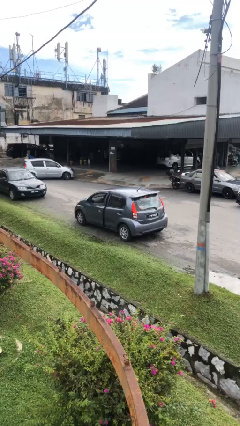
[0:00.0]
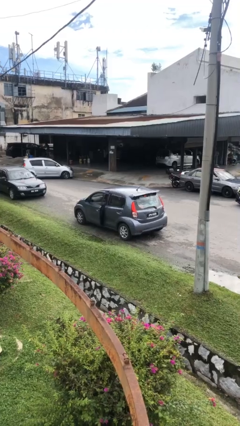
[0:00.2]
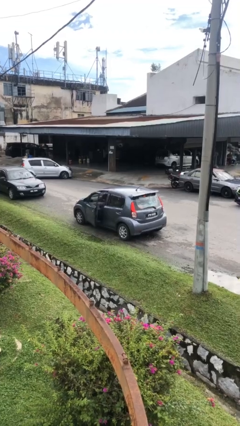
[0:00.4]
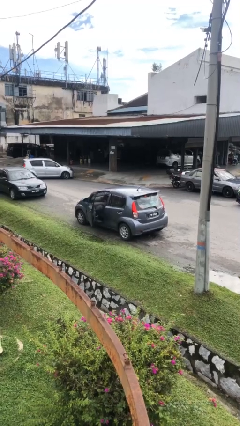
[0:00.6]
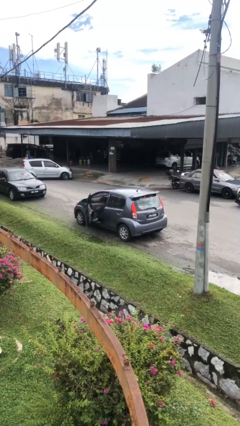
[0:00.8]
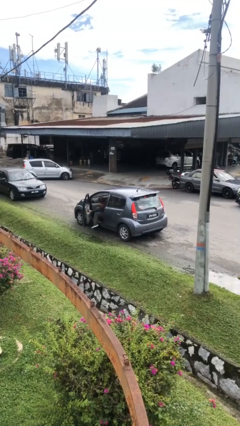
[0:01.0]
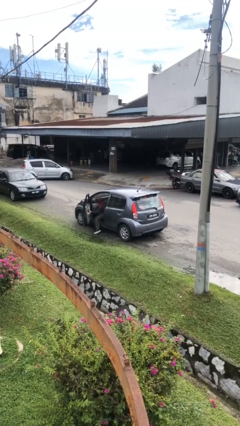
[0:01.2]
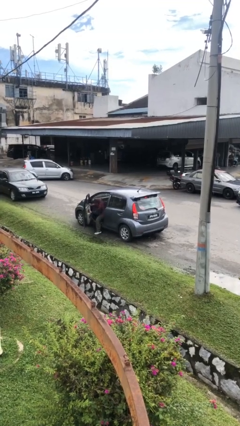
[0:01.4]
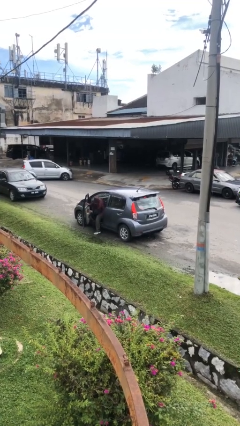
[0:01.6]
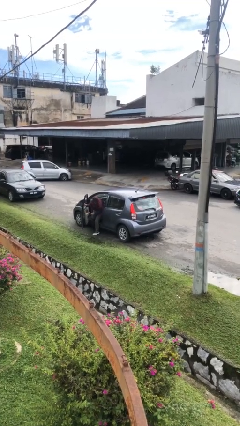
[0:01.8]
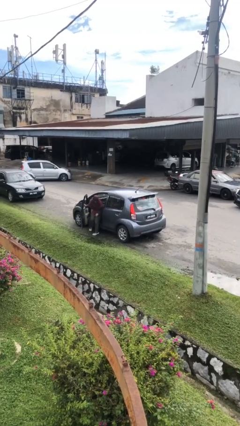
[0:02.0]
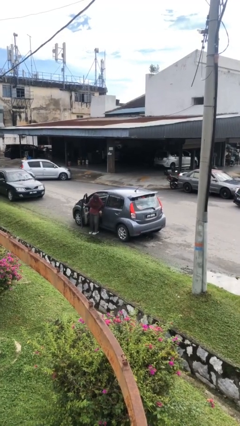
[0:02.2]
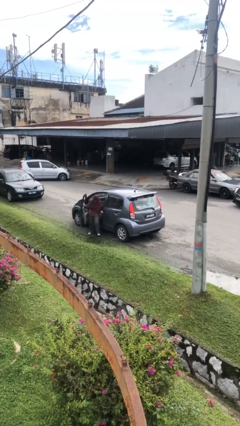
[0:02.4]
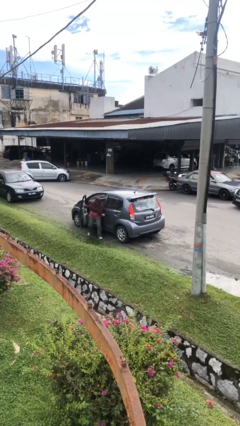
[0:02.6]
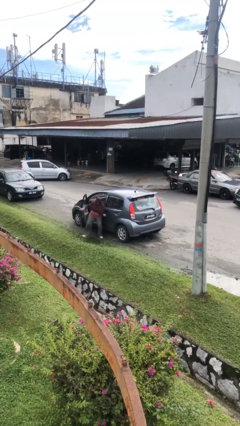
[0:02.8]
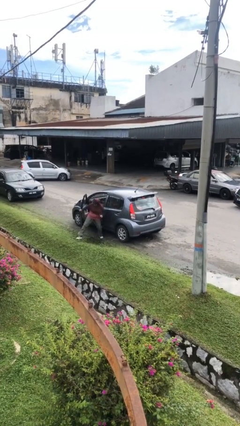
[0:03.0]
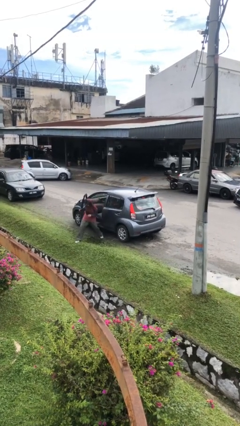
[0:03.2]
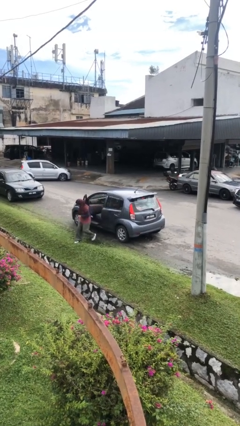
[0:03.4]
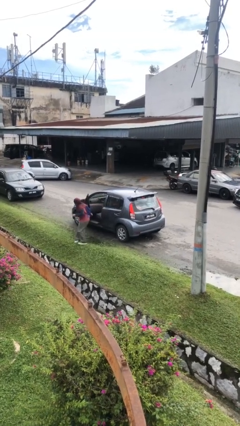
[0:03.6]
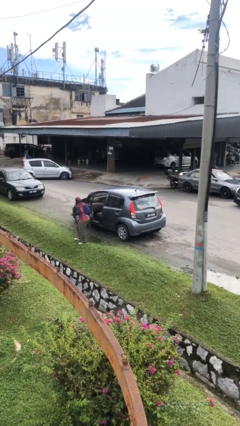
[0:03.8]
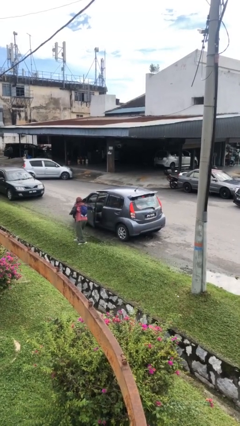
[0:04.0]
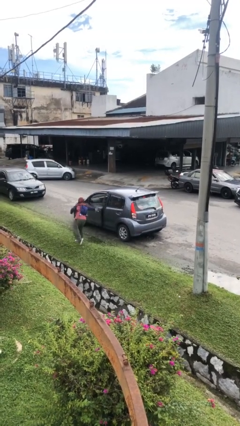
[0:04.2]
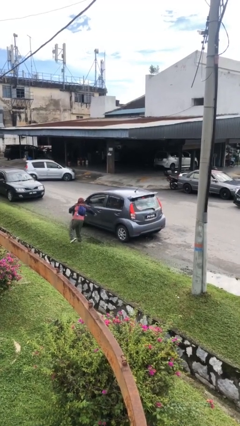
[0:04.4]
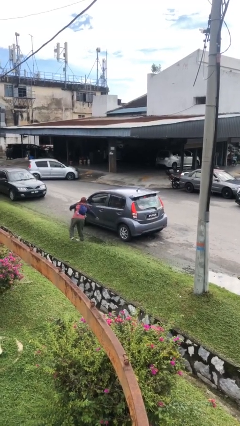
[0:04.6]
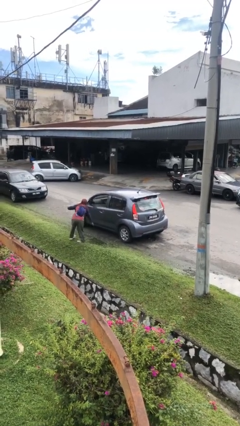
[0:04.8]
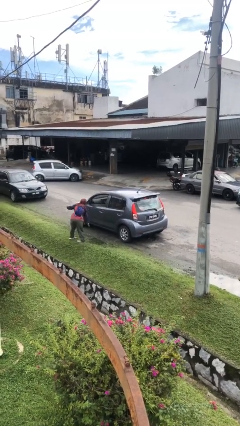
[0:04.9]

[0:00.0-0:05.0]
car drops off person

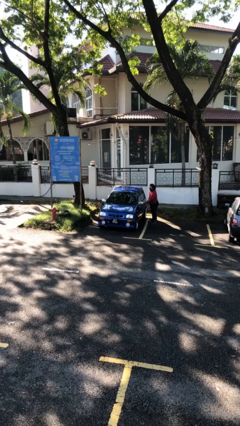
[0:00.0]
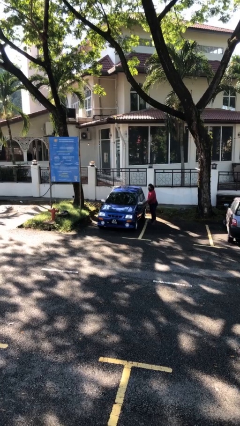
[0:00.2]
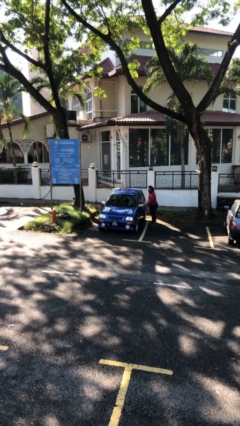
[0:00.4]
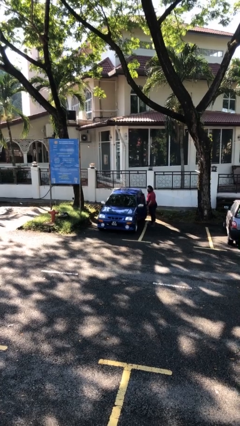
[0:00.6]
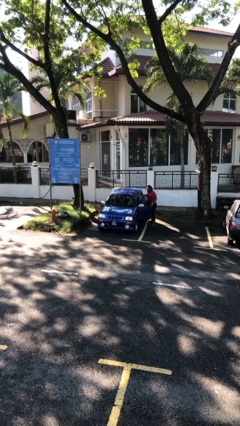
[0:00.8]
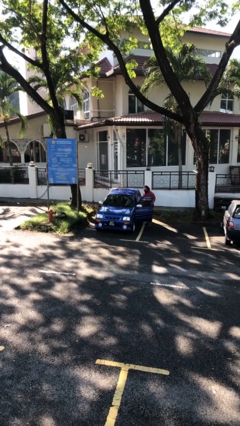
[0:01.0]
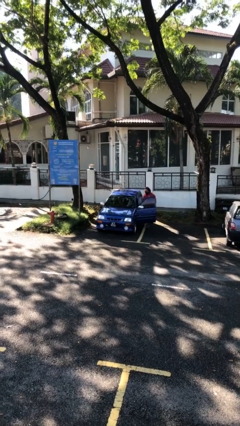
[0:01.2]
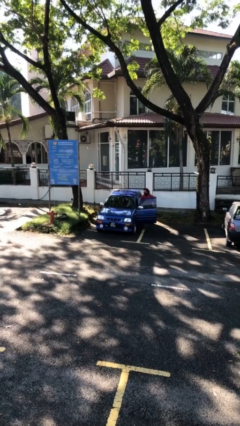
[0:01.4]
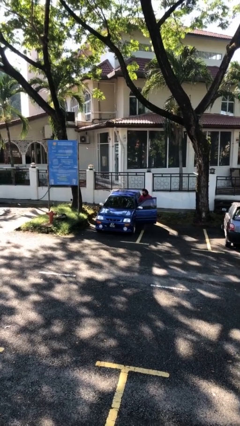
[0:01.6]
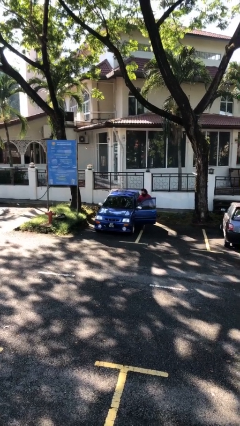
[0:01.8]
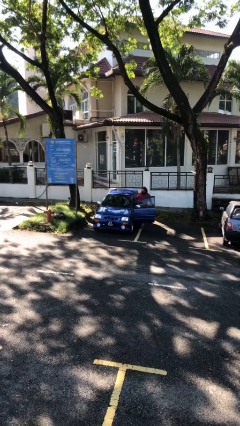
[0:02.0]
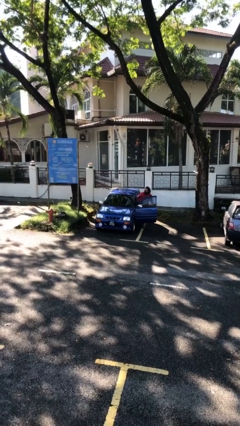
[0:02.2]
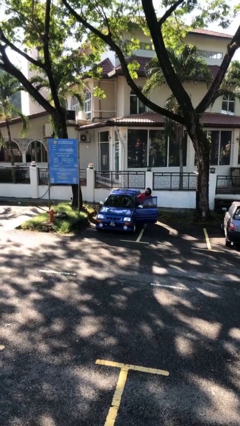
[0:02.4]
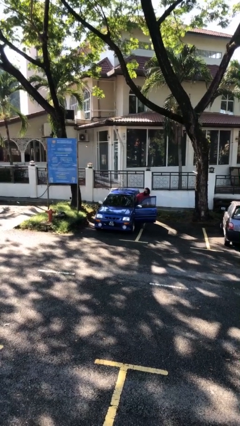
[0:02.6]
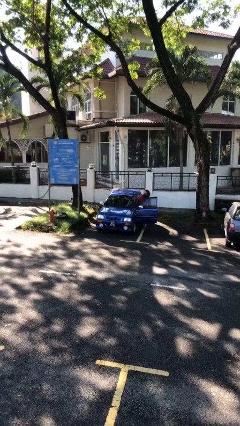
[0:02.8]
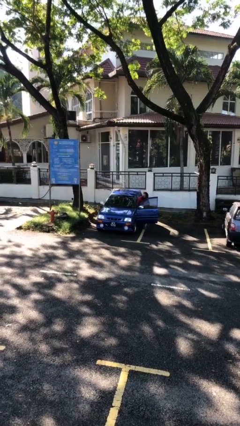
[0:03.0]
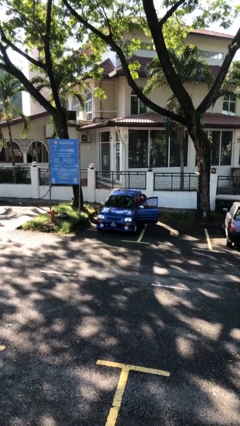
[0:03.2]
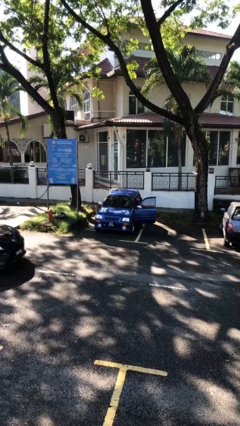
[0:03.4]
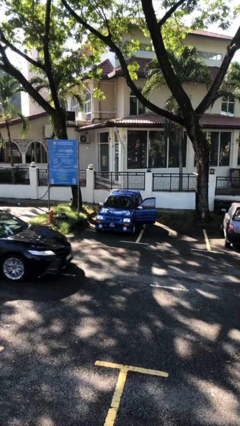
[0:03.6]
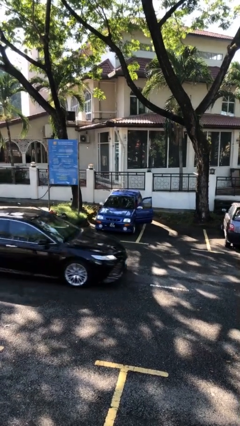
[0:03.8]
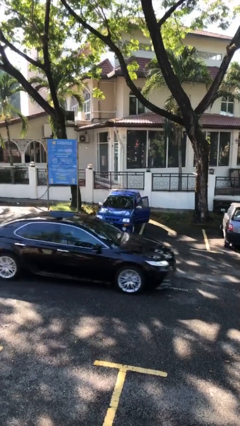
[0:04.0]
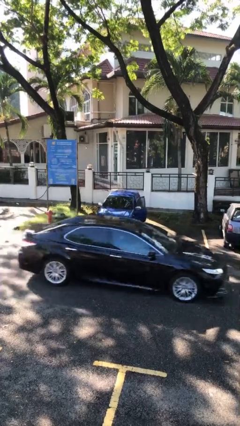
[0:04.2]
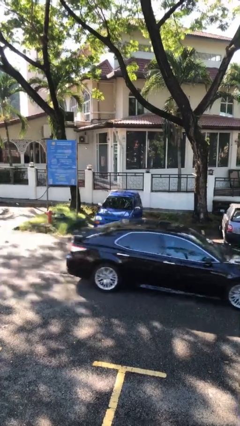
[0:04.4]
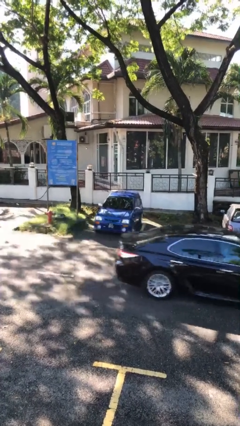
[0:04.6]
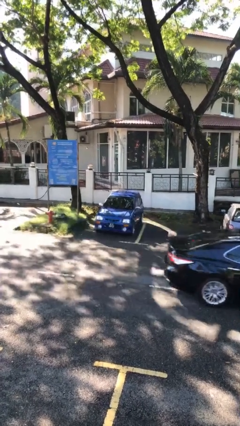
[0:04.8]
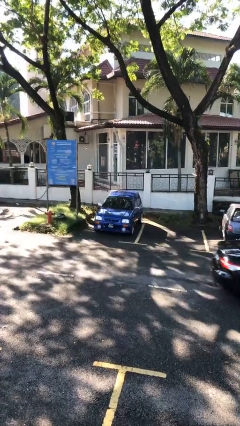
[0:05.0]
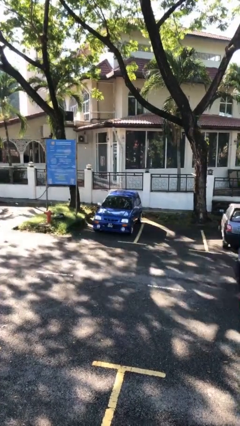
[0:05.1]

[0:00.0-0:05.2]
car picks up person

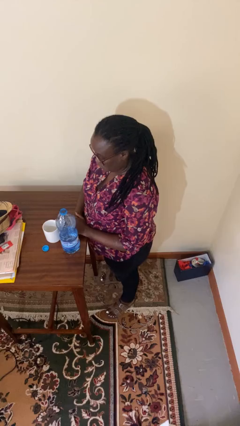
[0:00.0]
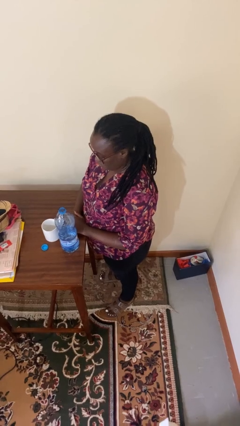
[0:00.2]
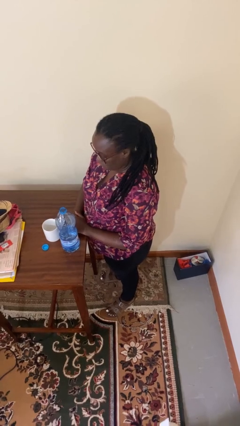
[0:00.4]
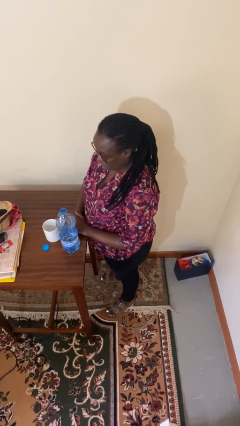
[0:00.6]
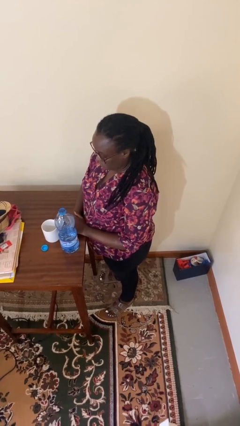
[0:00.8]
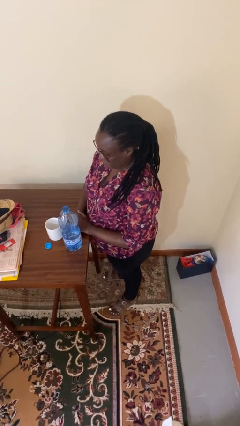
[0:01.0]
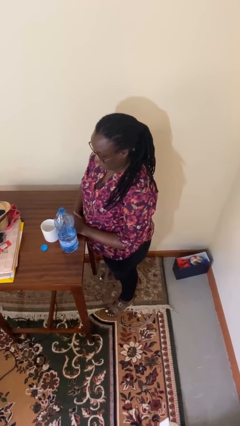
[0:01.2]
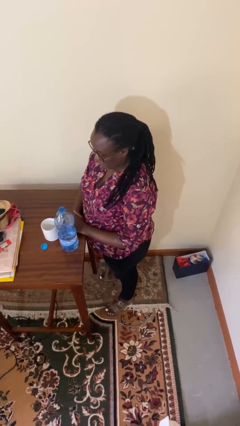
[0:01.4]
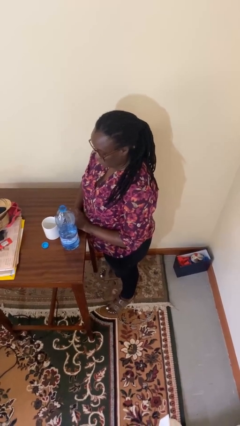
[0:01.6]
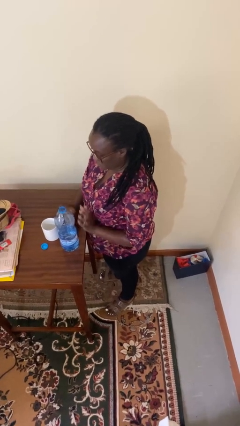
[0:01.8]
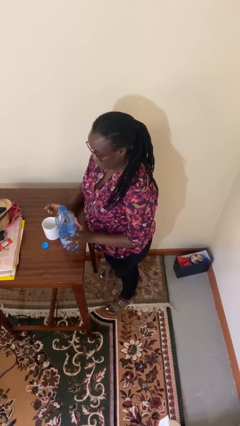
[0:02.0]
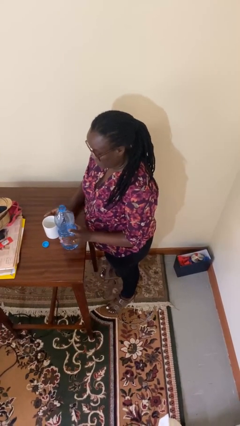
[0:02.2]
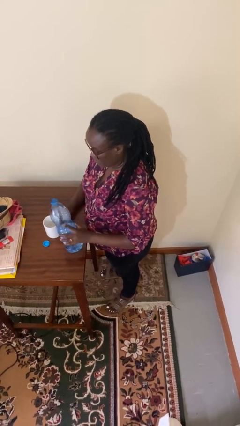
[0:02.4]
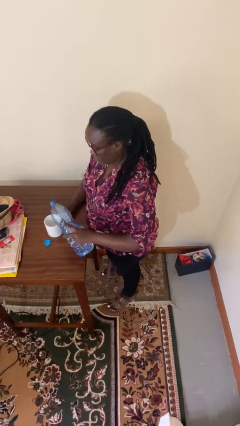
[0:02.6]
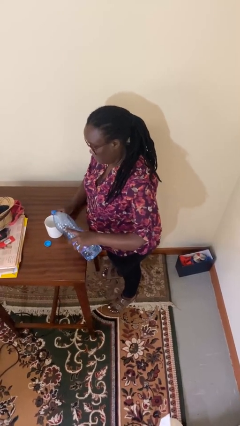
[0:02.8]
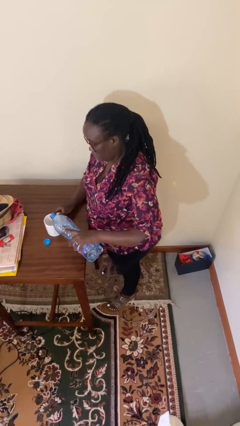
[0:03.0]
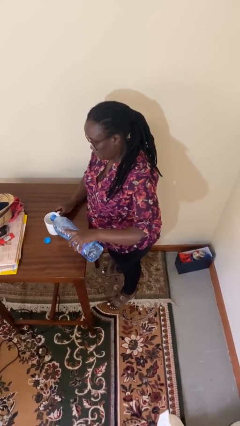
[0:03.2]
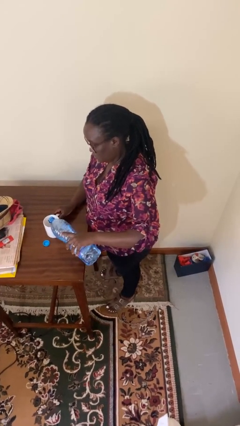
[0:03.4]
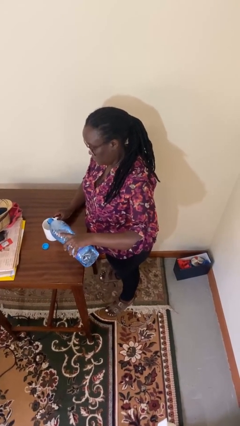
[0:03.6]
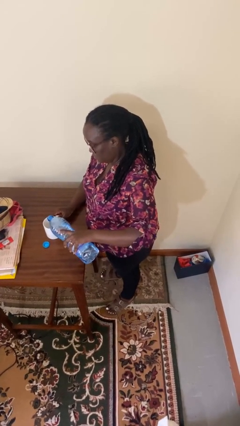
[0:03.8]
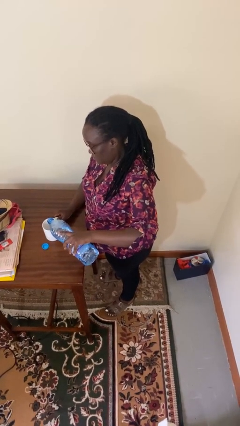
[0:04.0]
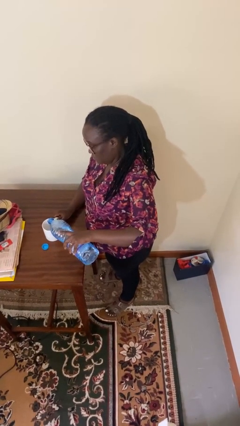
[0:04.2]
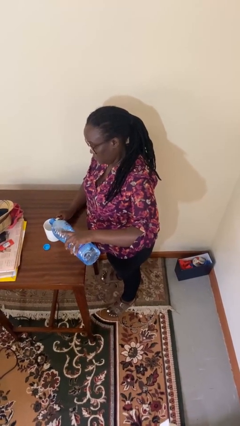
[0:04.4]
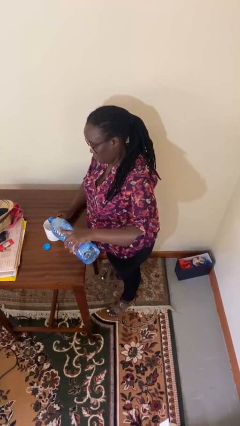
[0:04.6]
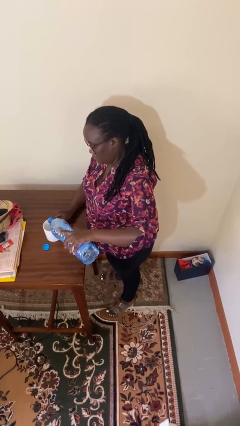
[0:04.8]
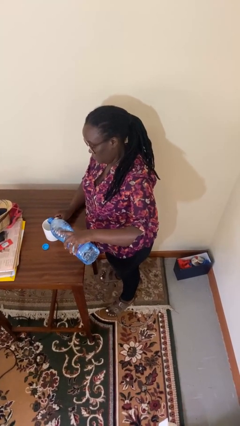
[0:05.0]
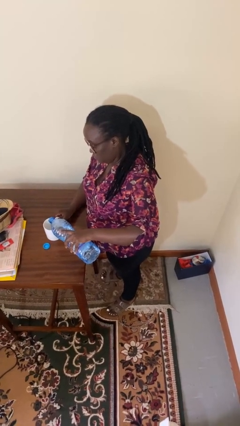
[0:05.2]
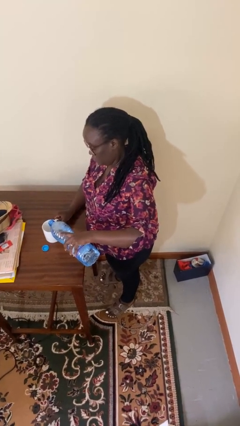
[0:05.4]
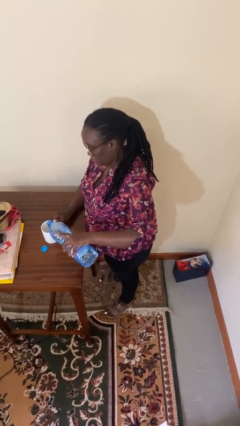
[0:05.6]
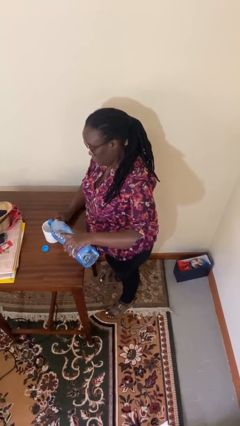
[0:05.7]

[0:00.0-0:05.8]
person pours liquid into cup

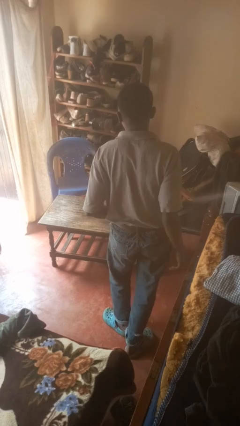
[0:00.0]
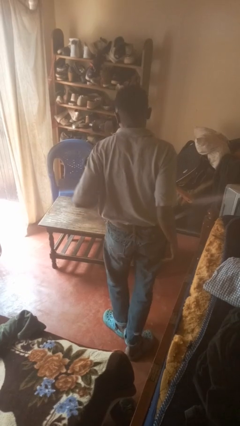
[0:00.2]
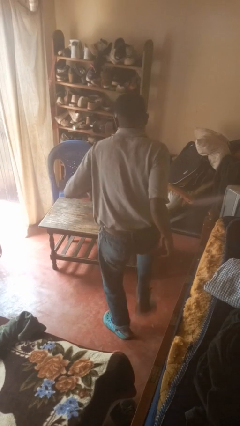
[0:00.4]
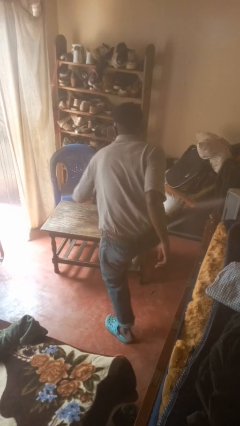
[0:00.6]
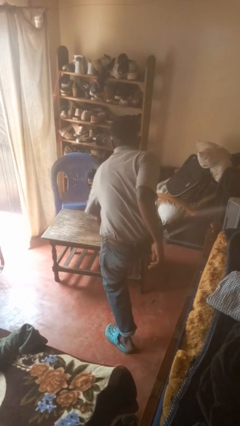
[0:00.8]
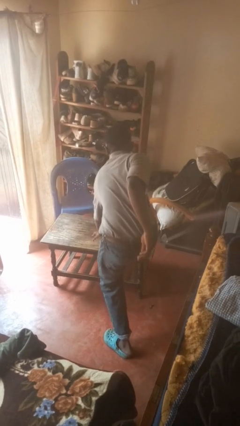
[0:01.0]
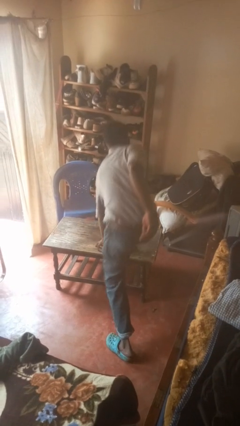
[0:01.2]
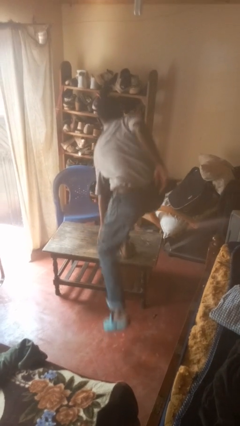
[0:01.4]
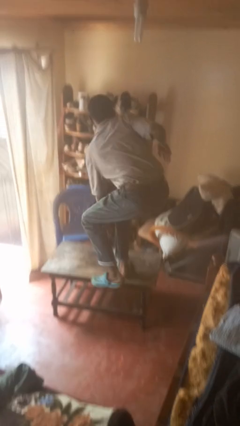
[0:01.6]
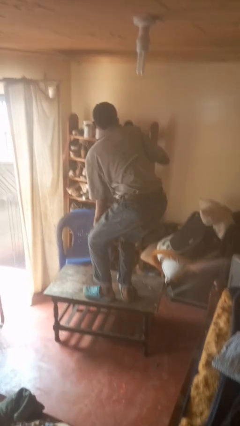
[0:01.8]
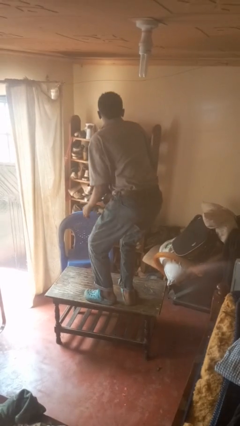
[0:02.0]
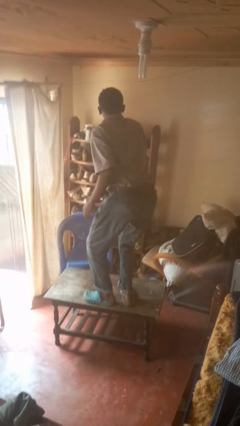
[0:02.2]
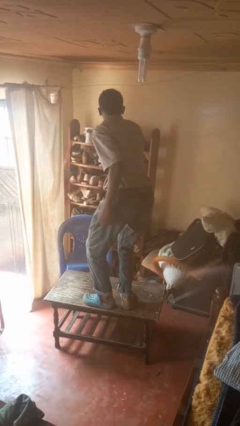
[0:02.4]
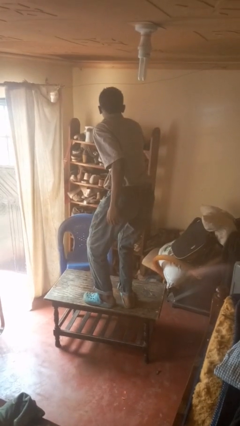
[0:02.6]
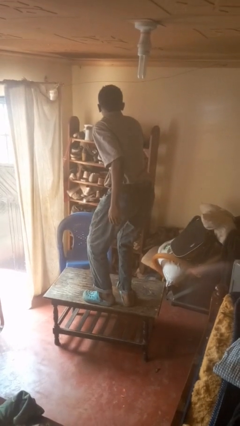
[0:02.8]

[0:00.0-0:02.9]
person climbs on table
